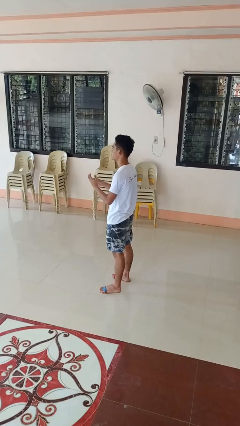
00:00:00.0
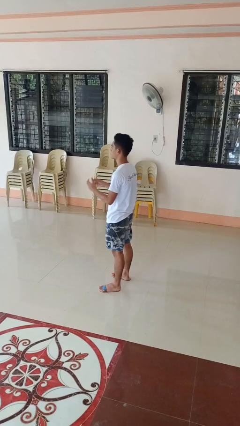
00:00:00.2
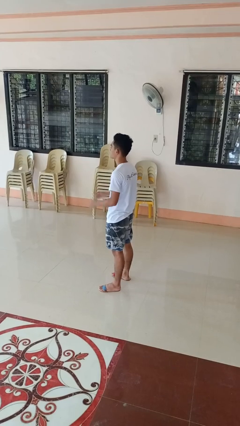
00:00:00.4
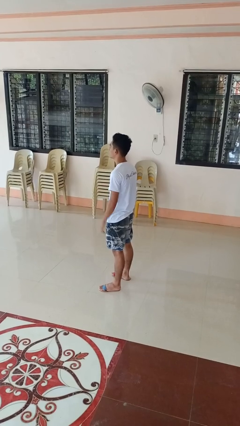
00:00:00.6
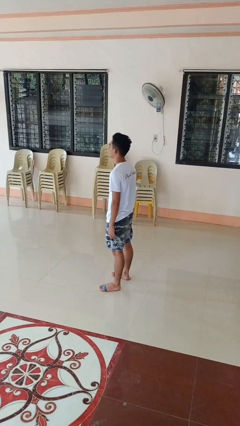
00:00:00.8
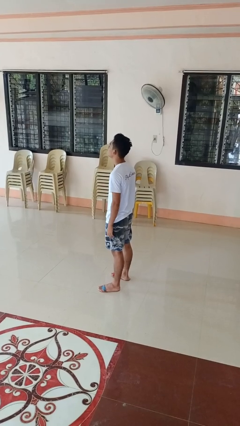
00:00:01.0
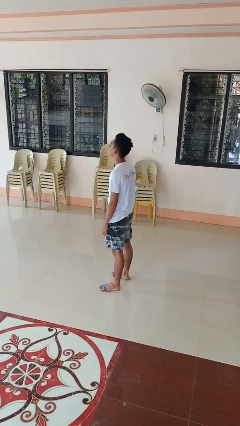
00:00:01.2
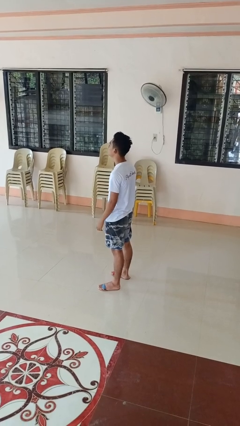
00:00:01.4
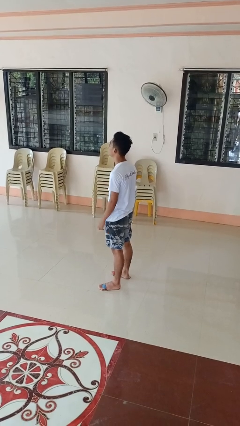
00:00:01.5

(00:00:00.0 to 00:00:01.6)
person takes off ring

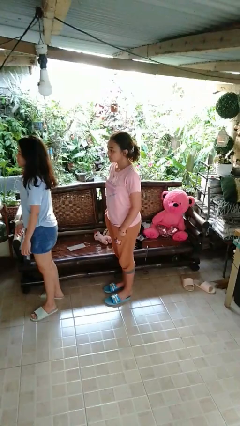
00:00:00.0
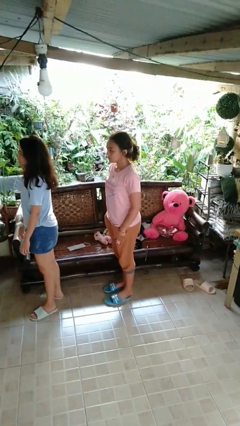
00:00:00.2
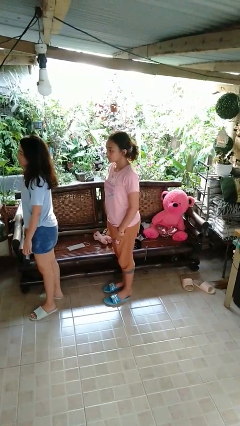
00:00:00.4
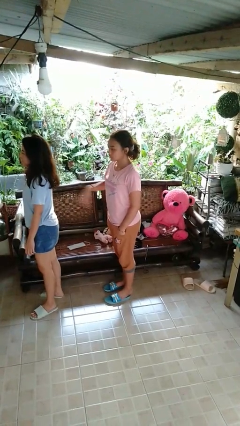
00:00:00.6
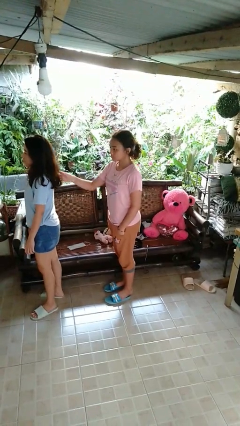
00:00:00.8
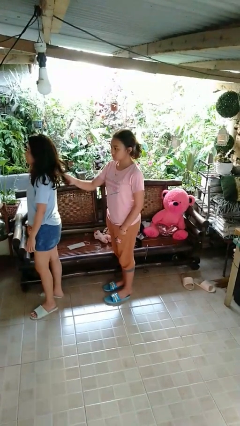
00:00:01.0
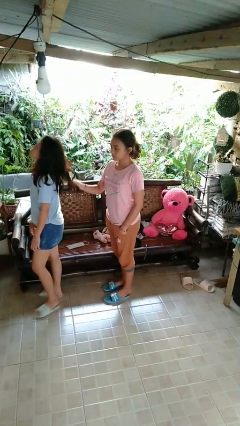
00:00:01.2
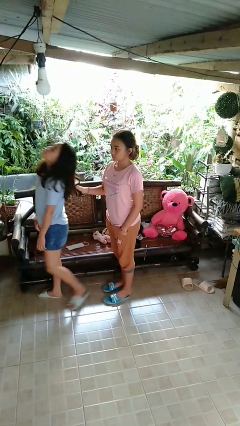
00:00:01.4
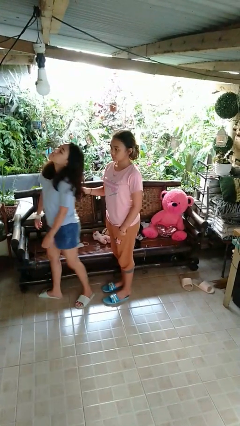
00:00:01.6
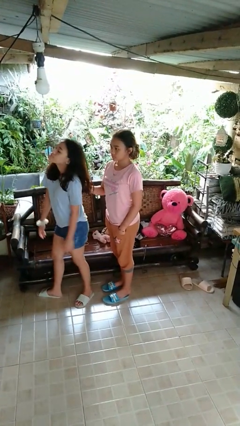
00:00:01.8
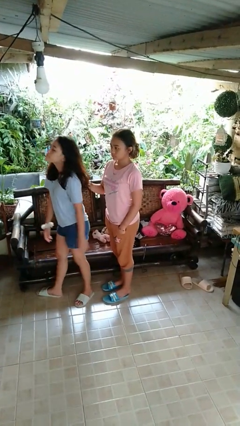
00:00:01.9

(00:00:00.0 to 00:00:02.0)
person grabs person by hair

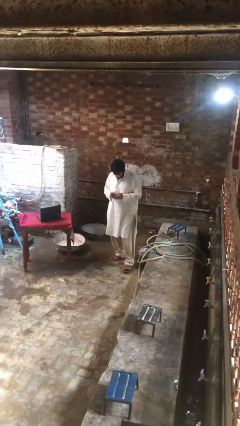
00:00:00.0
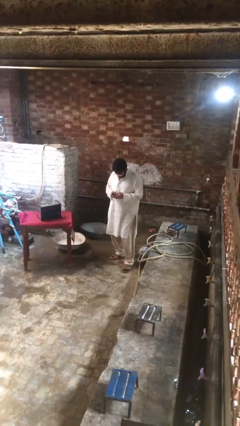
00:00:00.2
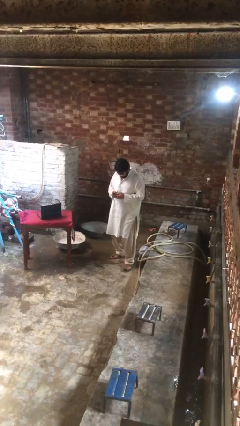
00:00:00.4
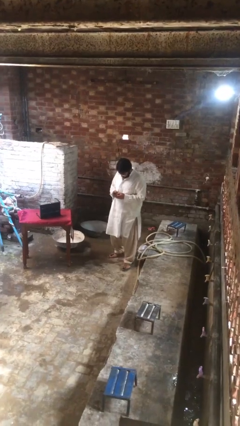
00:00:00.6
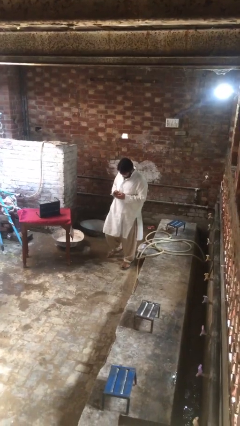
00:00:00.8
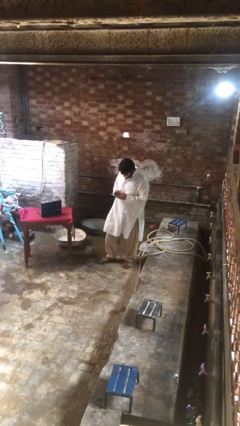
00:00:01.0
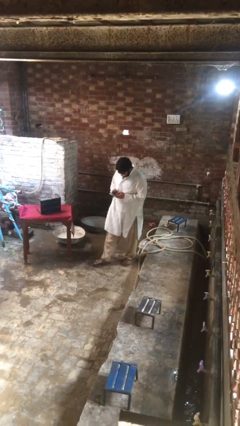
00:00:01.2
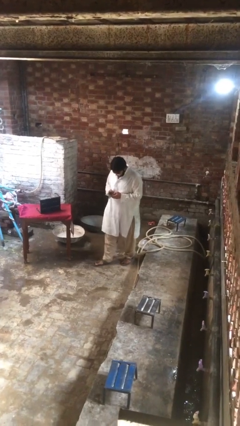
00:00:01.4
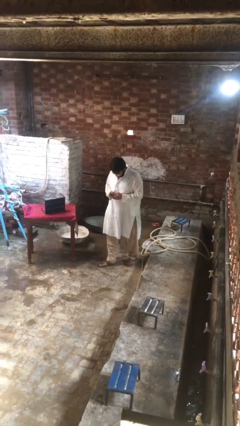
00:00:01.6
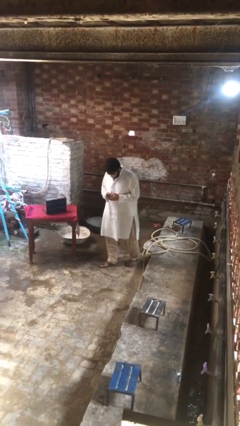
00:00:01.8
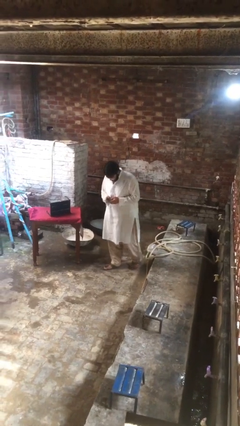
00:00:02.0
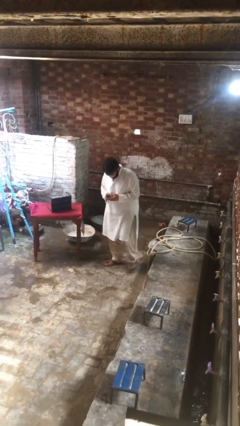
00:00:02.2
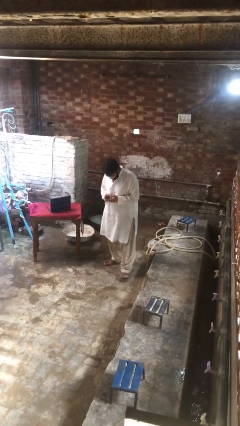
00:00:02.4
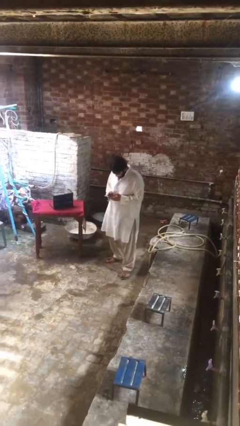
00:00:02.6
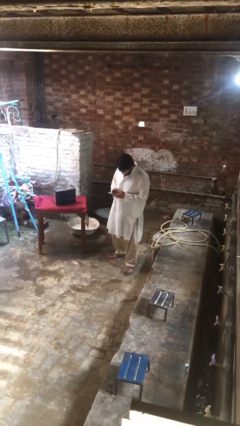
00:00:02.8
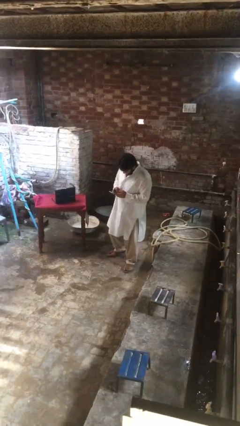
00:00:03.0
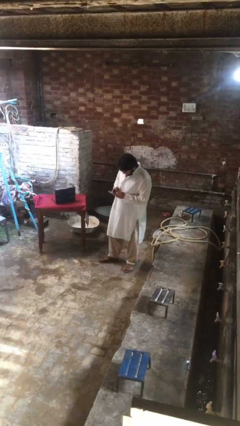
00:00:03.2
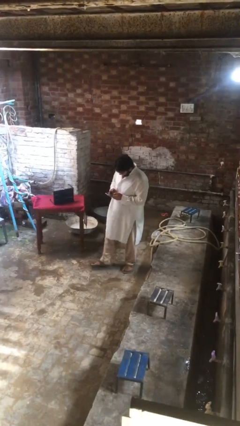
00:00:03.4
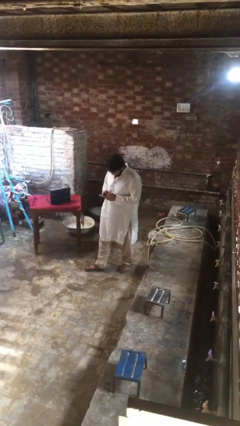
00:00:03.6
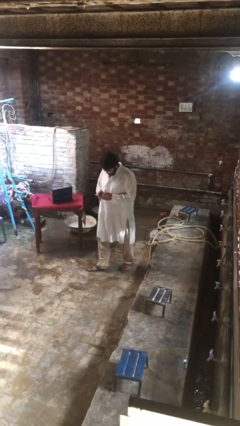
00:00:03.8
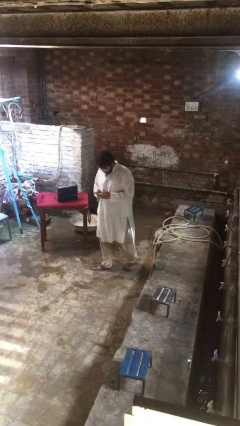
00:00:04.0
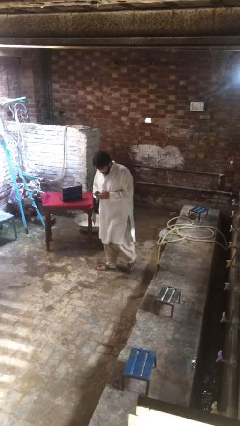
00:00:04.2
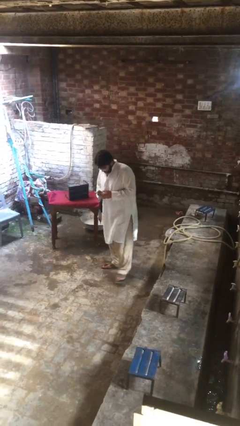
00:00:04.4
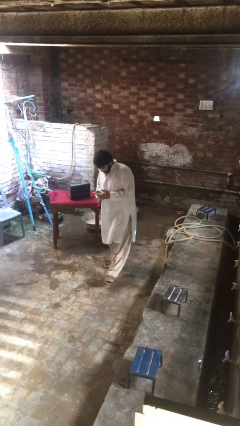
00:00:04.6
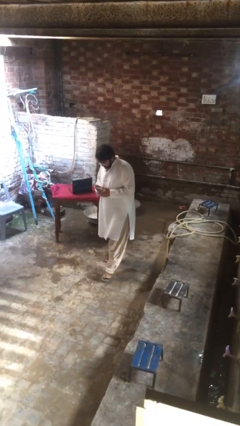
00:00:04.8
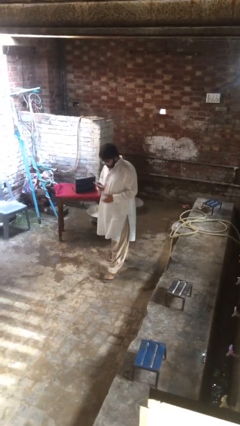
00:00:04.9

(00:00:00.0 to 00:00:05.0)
person texts on phone

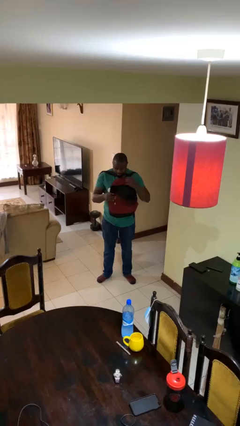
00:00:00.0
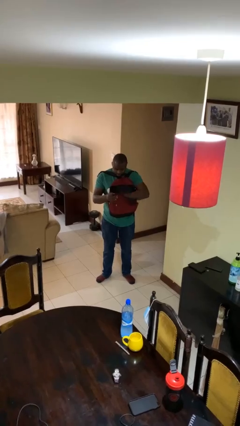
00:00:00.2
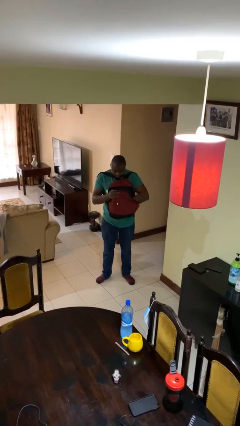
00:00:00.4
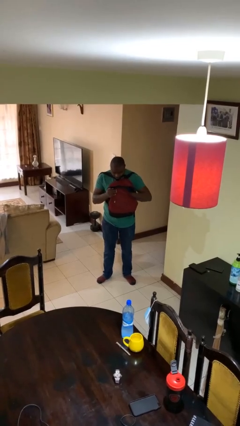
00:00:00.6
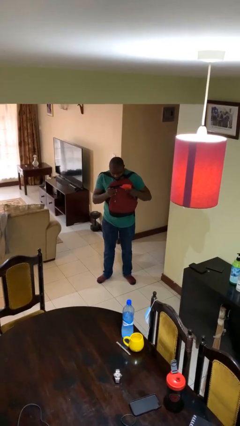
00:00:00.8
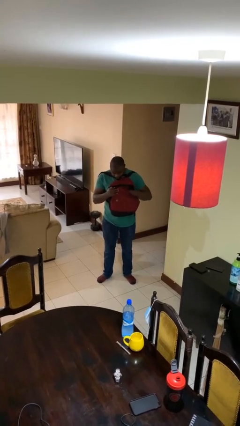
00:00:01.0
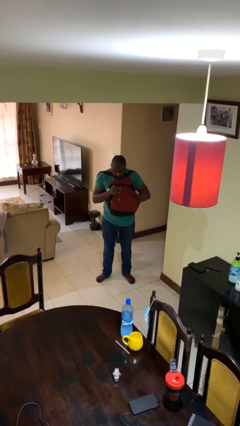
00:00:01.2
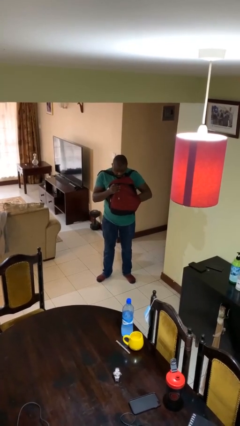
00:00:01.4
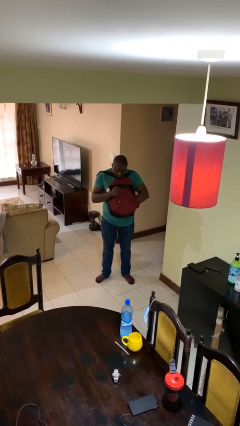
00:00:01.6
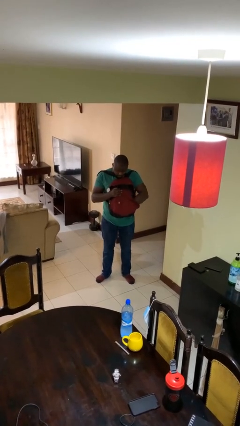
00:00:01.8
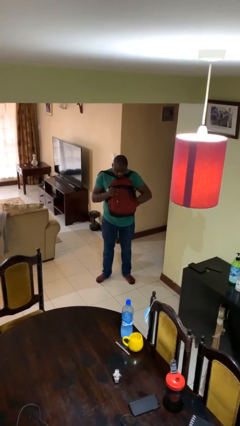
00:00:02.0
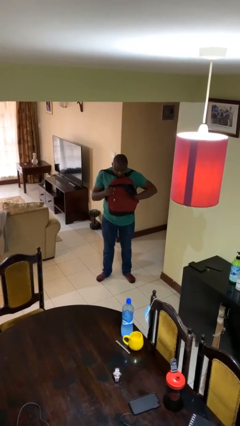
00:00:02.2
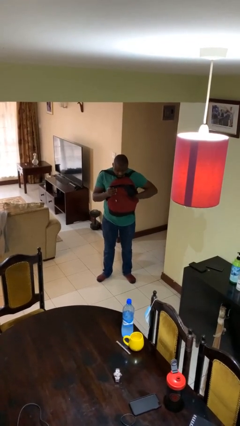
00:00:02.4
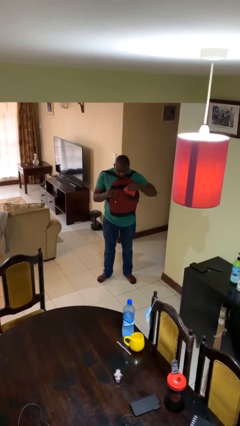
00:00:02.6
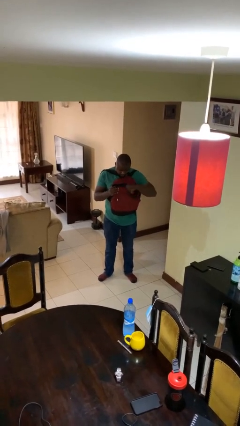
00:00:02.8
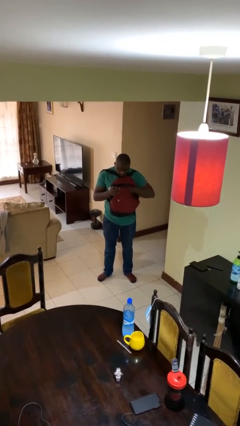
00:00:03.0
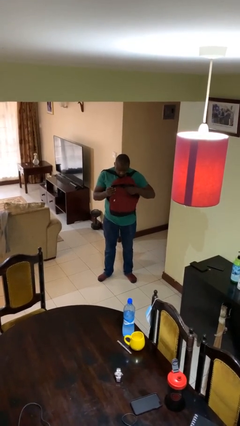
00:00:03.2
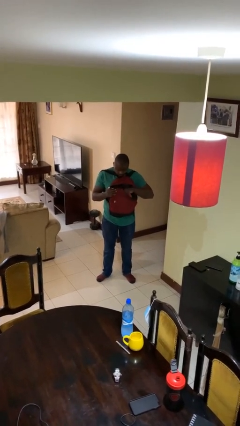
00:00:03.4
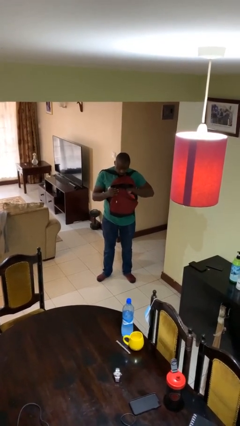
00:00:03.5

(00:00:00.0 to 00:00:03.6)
person searches in backpack

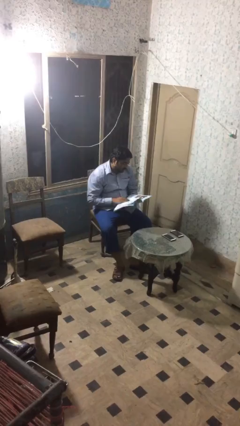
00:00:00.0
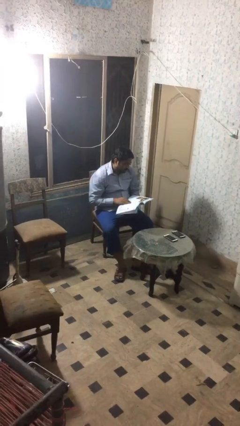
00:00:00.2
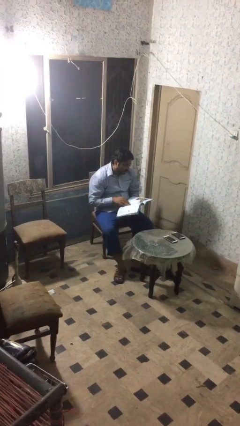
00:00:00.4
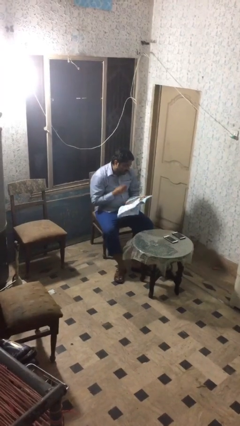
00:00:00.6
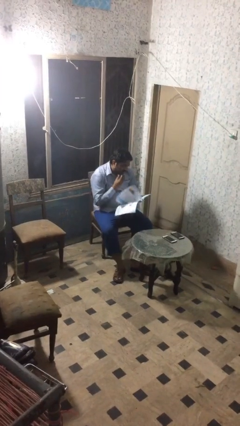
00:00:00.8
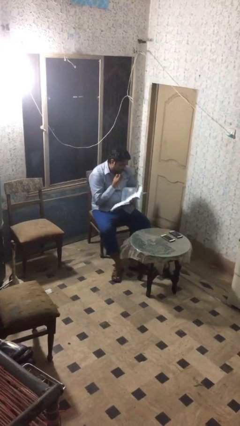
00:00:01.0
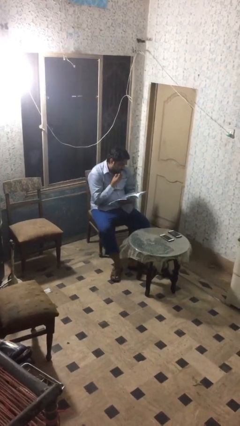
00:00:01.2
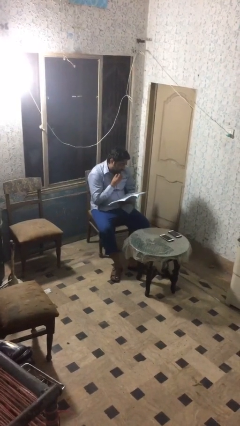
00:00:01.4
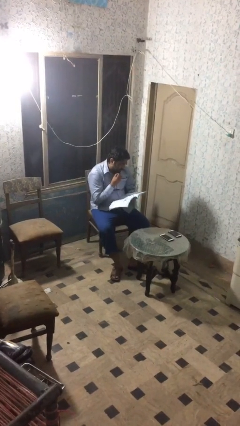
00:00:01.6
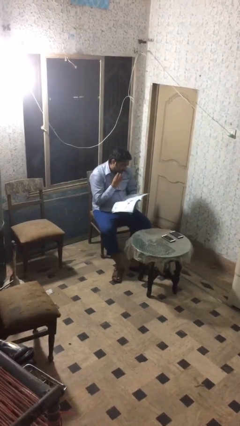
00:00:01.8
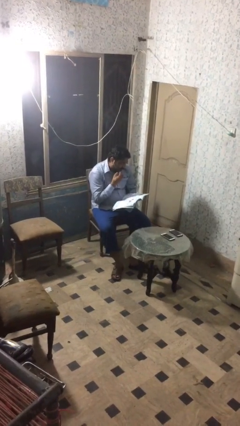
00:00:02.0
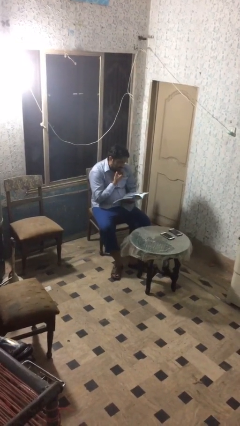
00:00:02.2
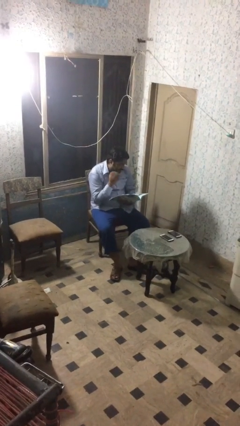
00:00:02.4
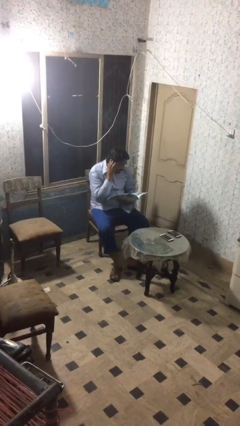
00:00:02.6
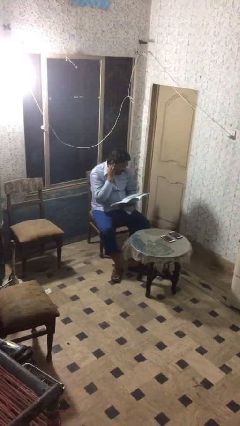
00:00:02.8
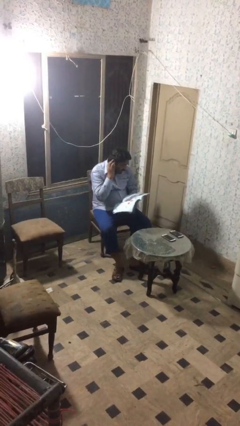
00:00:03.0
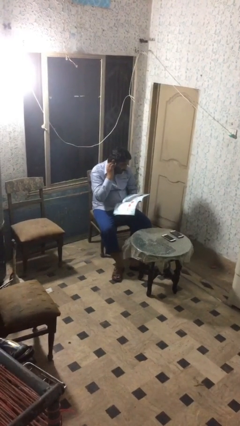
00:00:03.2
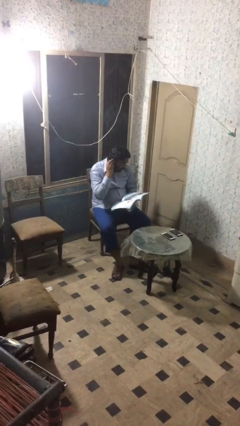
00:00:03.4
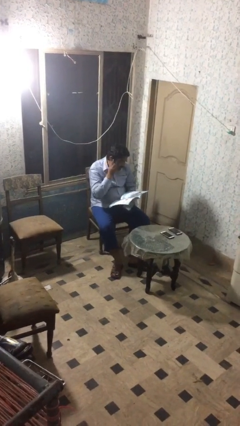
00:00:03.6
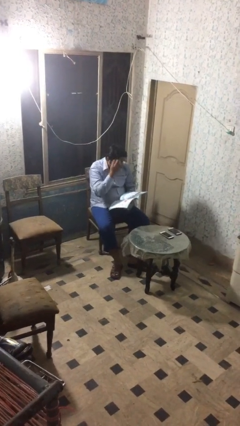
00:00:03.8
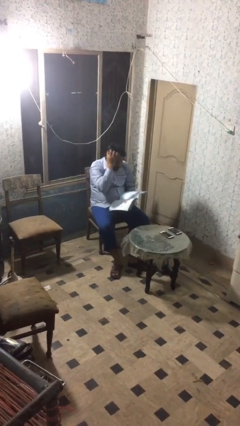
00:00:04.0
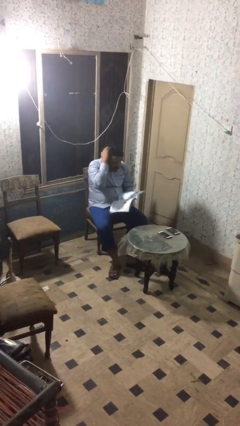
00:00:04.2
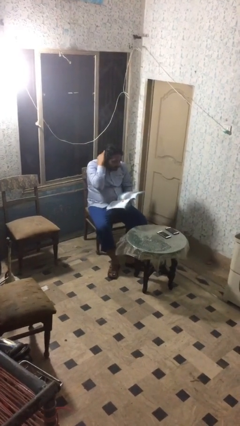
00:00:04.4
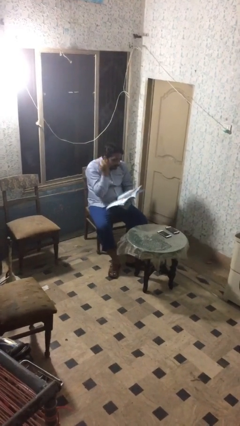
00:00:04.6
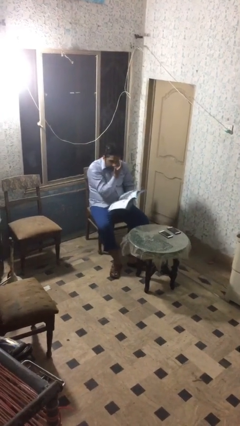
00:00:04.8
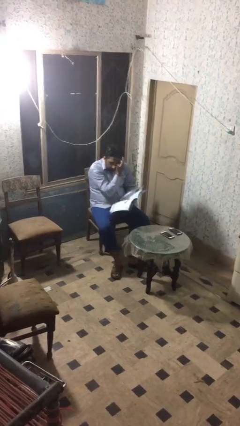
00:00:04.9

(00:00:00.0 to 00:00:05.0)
person reads document
